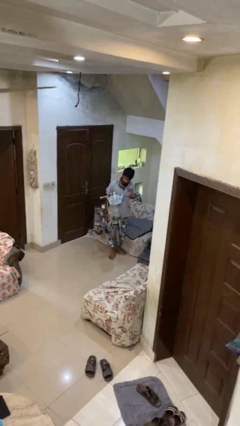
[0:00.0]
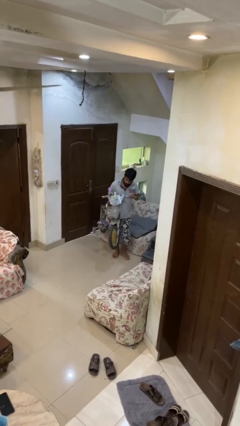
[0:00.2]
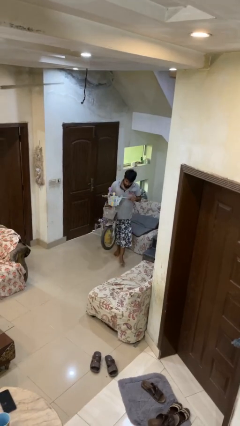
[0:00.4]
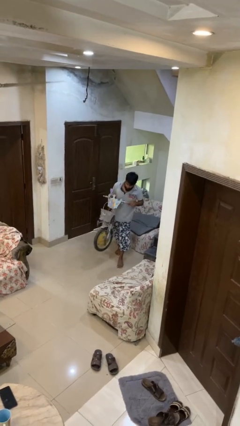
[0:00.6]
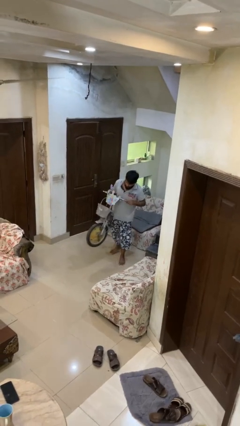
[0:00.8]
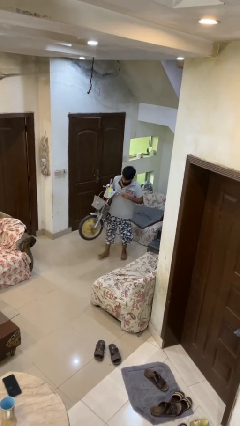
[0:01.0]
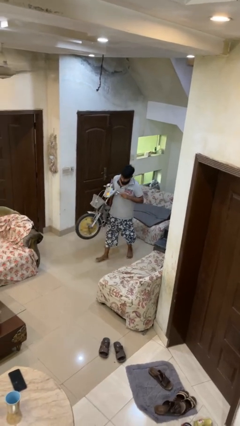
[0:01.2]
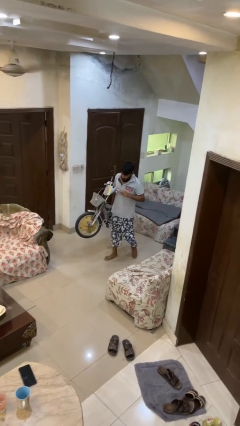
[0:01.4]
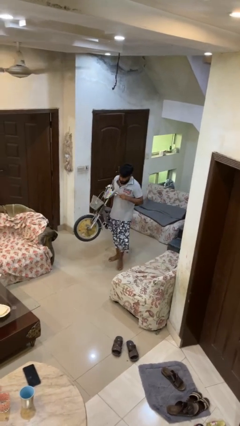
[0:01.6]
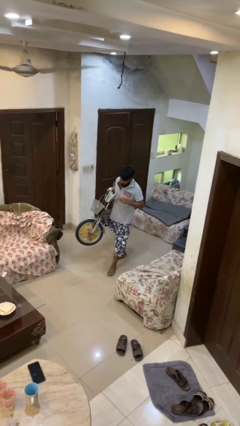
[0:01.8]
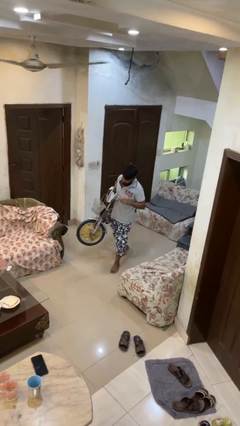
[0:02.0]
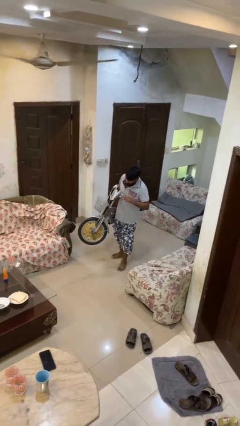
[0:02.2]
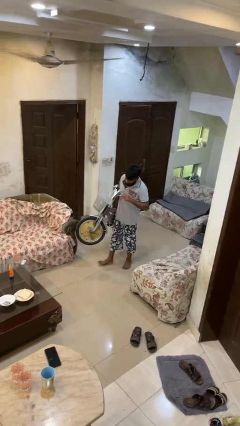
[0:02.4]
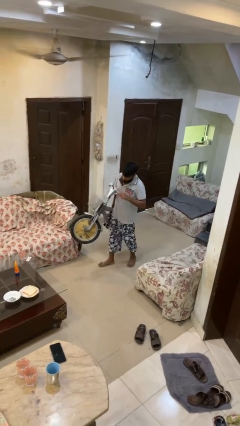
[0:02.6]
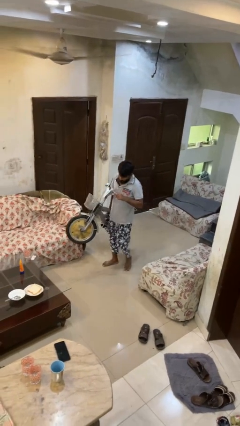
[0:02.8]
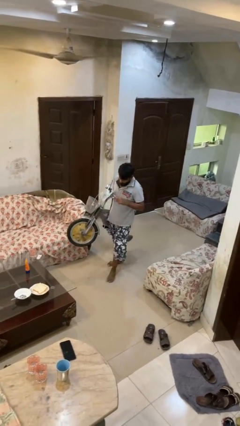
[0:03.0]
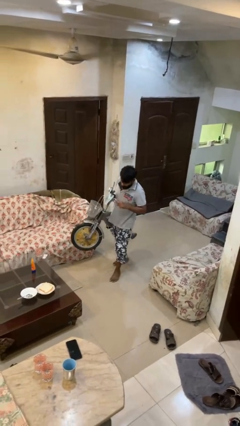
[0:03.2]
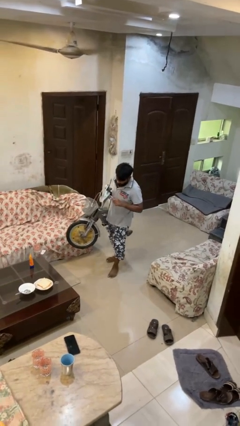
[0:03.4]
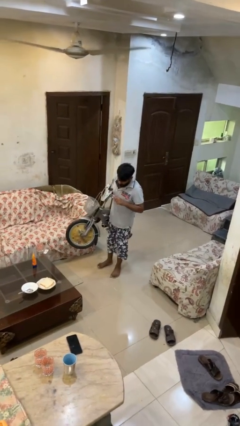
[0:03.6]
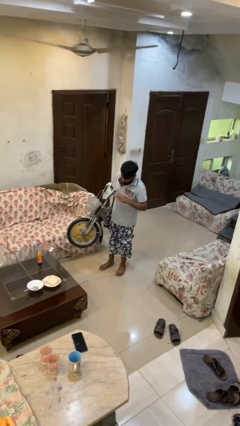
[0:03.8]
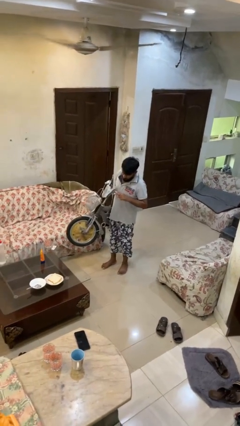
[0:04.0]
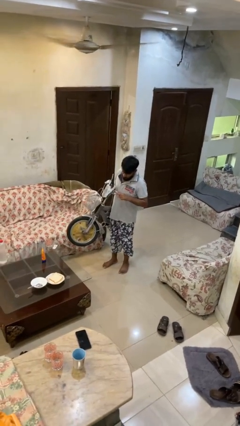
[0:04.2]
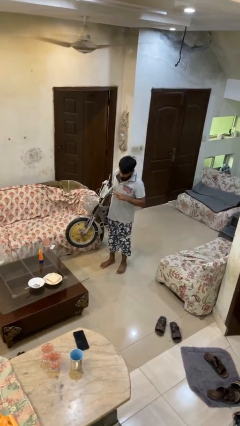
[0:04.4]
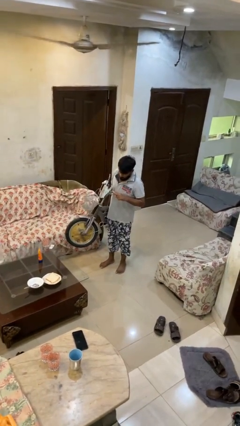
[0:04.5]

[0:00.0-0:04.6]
person carries bicycle

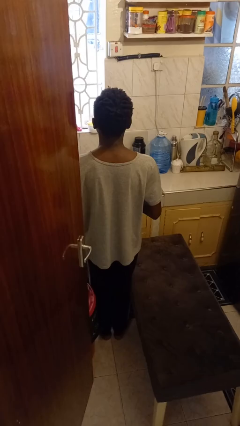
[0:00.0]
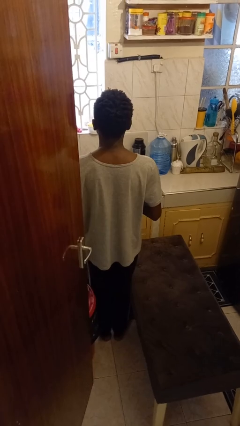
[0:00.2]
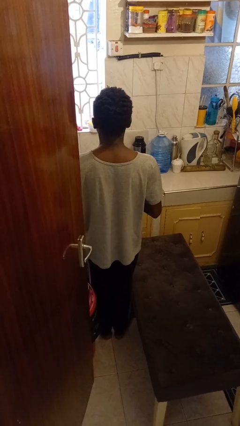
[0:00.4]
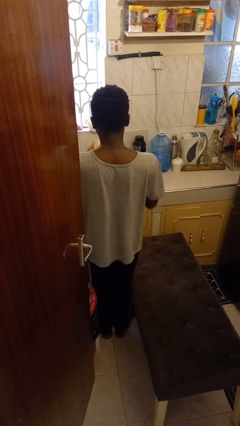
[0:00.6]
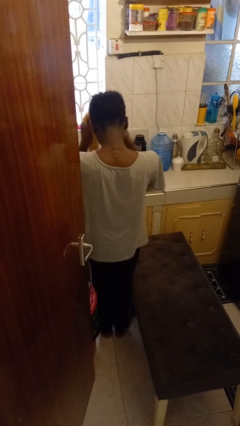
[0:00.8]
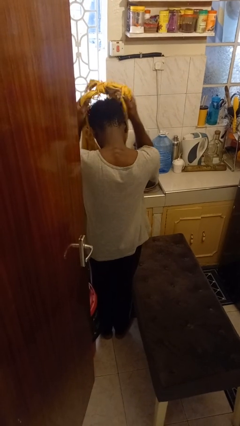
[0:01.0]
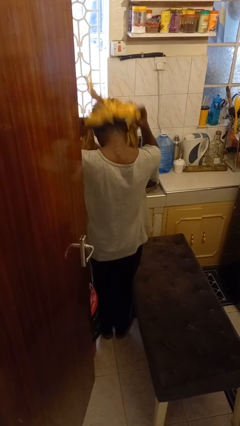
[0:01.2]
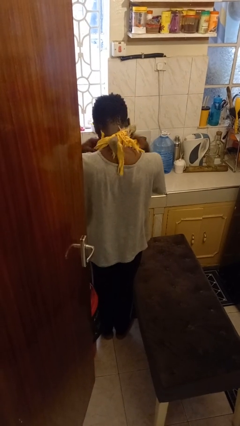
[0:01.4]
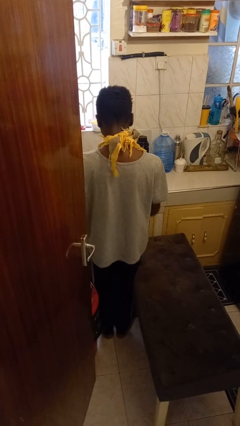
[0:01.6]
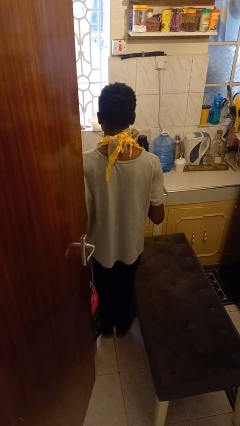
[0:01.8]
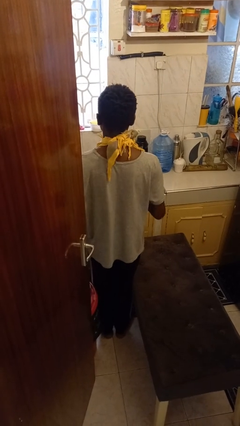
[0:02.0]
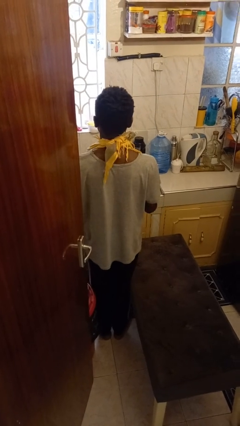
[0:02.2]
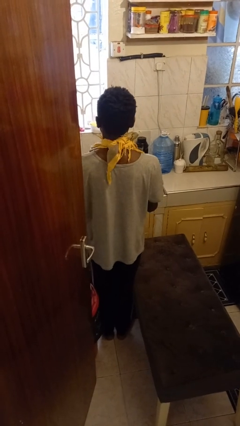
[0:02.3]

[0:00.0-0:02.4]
person puts on apron

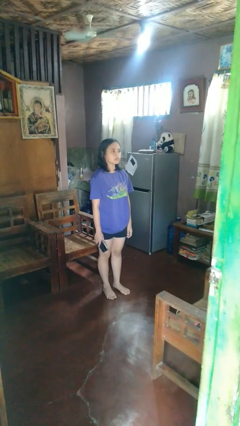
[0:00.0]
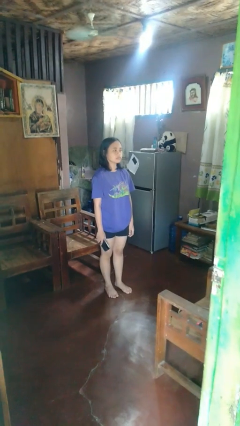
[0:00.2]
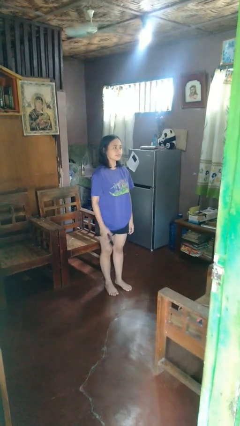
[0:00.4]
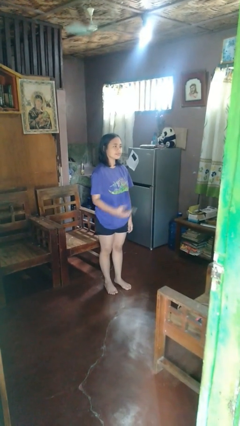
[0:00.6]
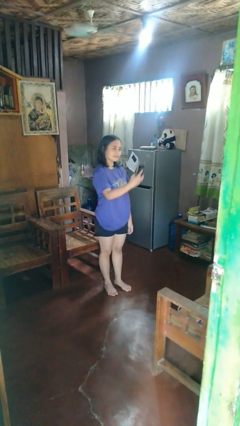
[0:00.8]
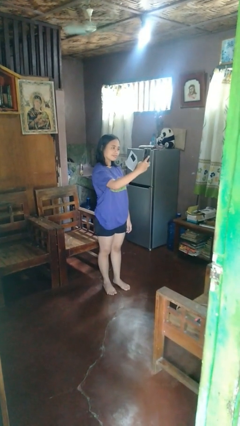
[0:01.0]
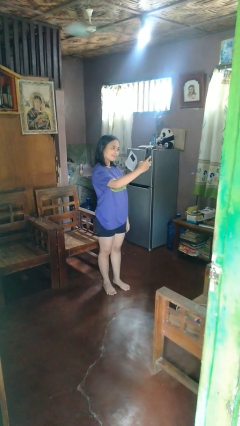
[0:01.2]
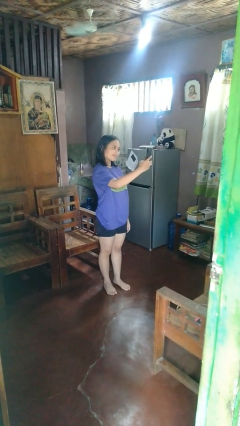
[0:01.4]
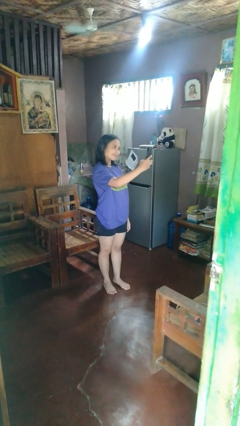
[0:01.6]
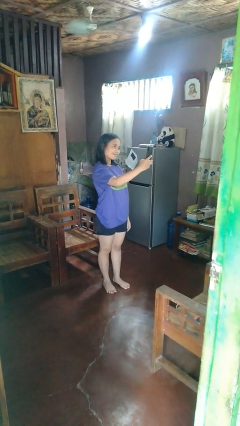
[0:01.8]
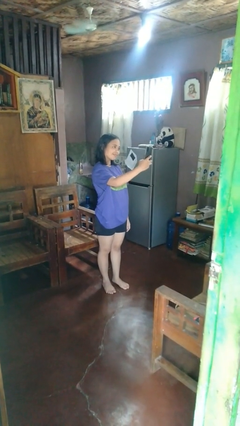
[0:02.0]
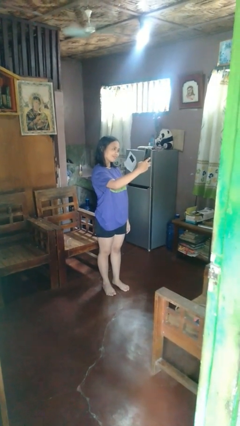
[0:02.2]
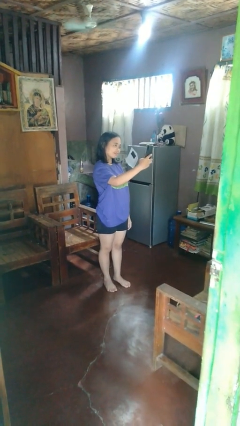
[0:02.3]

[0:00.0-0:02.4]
person takes selfie

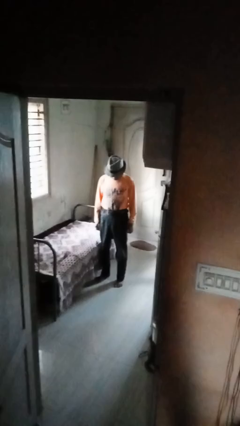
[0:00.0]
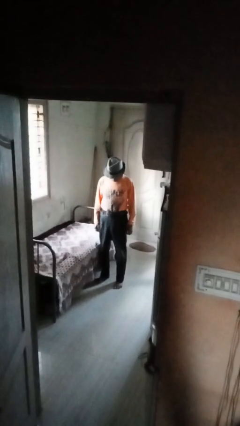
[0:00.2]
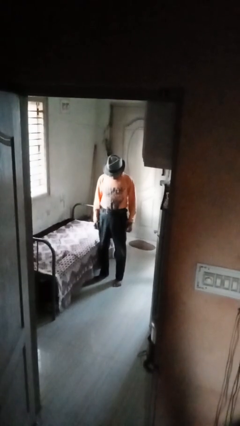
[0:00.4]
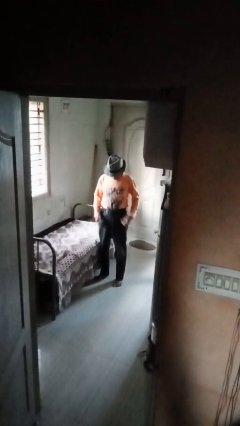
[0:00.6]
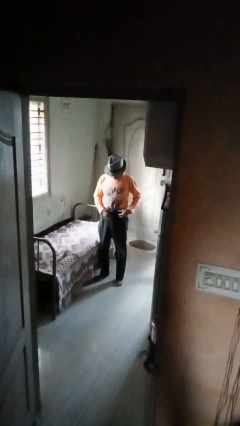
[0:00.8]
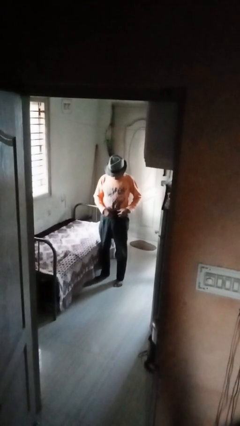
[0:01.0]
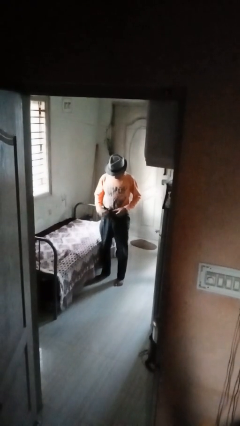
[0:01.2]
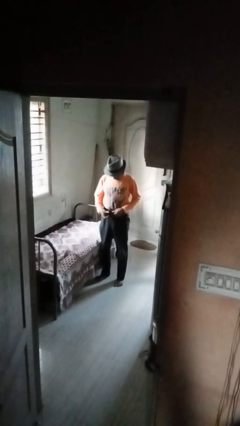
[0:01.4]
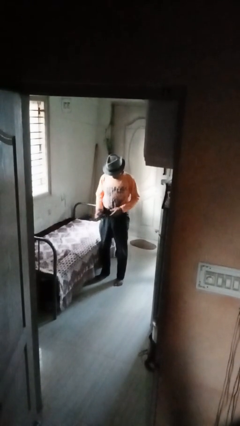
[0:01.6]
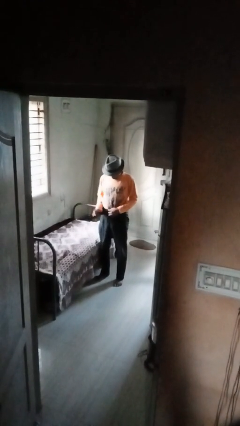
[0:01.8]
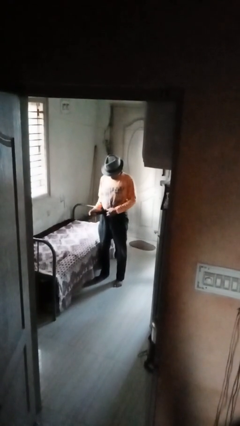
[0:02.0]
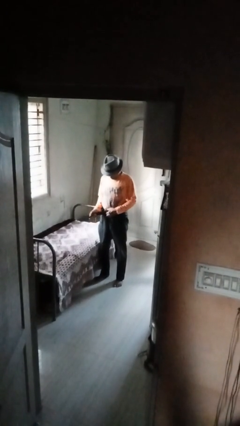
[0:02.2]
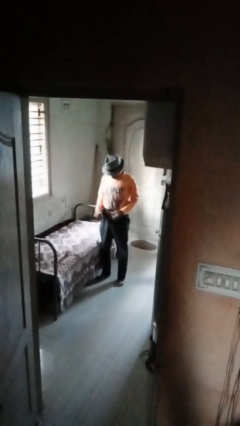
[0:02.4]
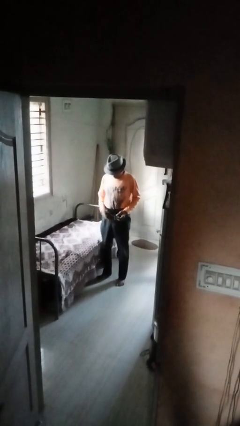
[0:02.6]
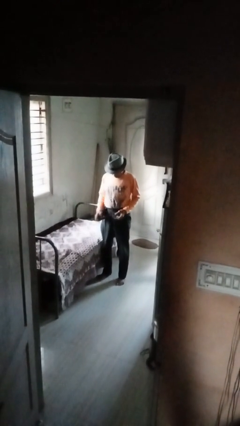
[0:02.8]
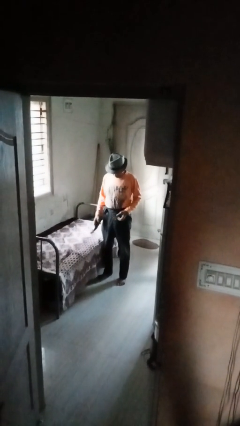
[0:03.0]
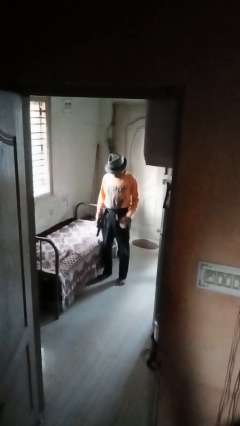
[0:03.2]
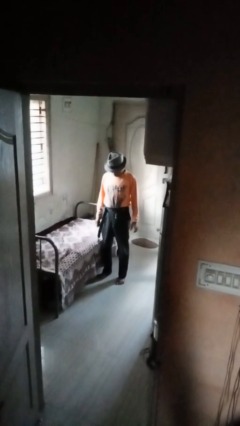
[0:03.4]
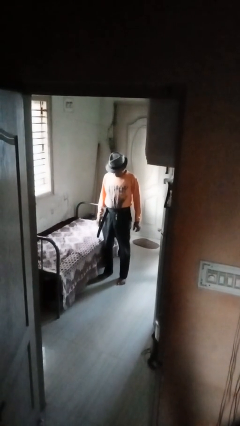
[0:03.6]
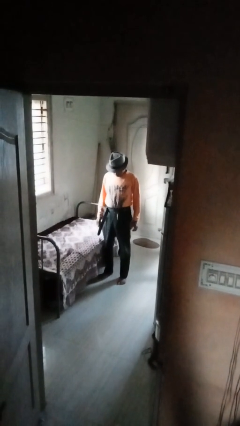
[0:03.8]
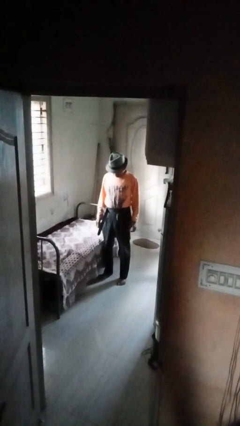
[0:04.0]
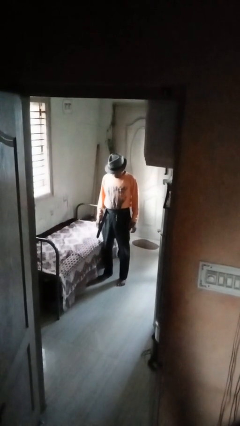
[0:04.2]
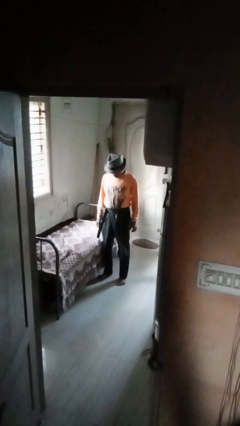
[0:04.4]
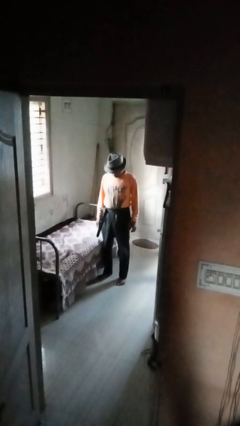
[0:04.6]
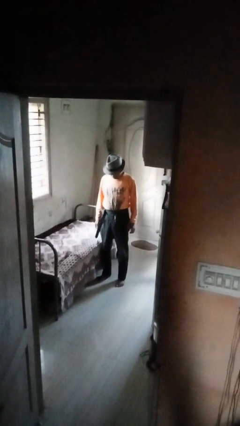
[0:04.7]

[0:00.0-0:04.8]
person takes off belt

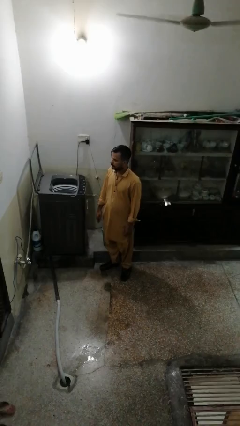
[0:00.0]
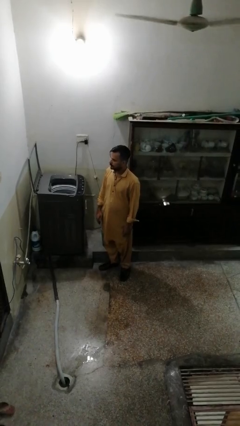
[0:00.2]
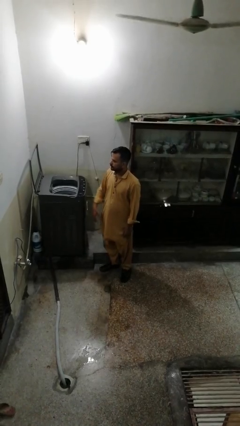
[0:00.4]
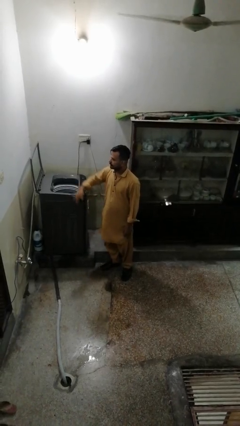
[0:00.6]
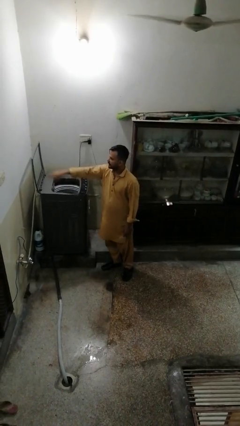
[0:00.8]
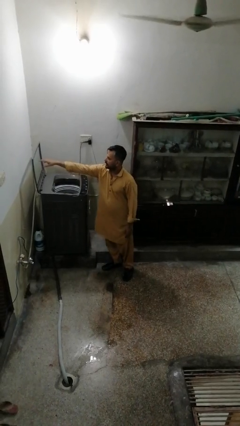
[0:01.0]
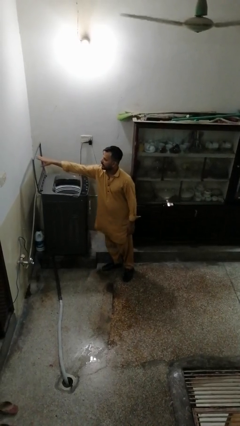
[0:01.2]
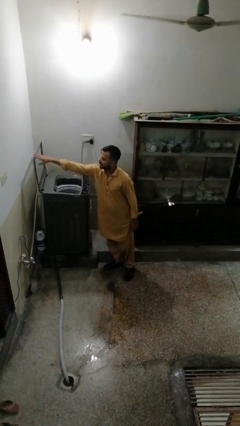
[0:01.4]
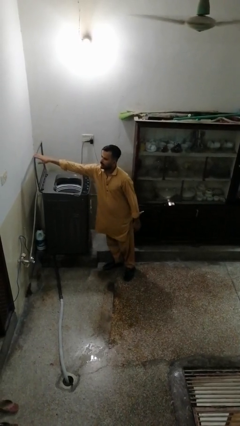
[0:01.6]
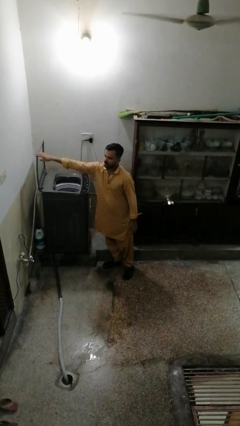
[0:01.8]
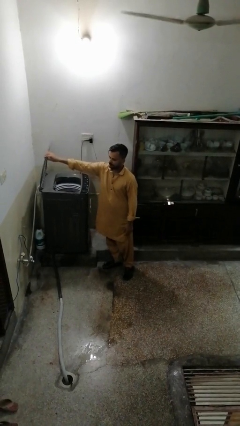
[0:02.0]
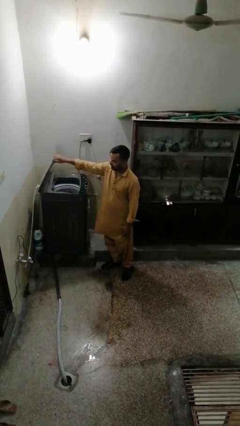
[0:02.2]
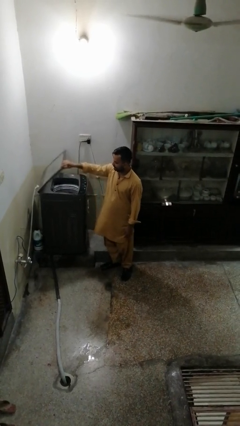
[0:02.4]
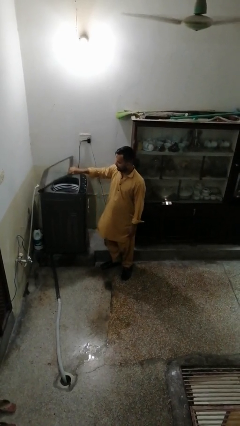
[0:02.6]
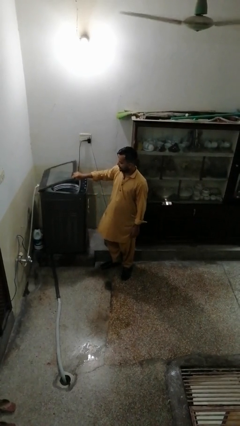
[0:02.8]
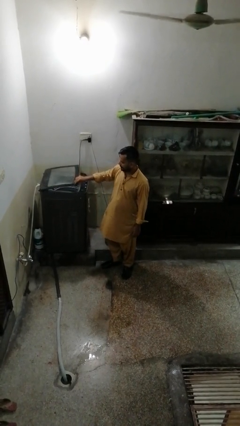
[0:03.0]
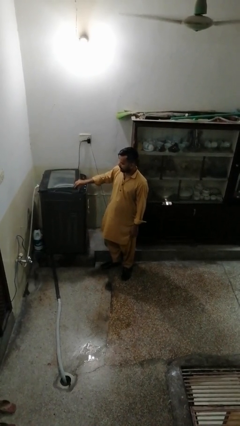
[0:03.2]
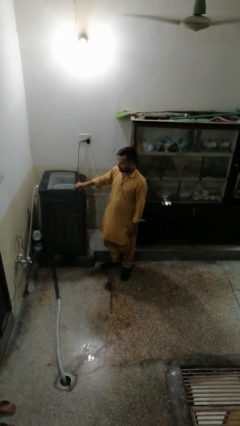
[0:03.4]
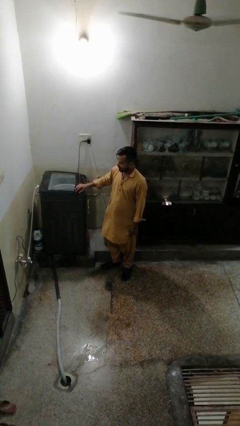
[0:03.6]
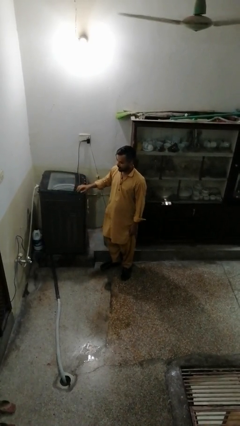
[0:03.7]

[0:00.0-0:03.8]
person closes clothes washer
